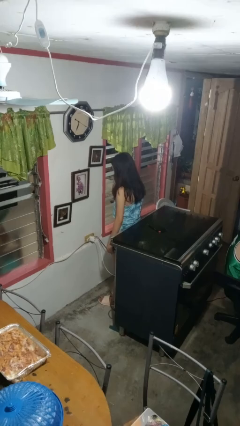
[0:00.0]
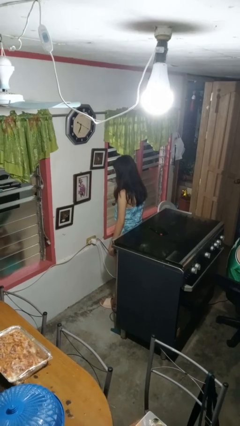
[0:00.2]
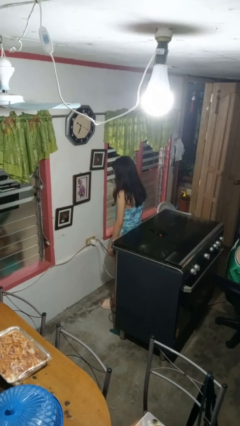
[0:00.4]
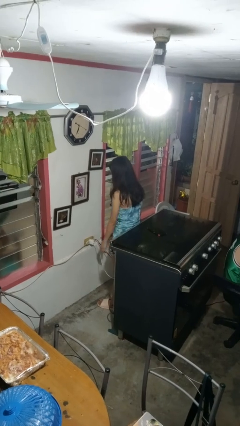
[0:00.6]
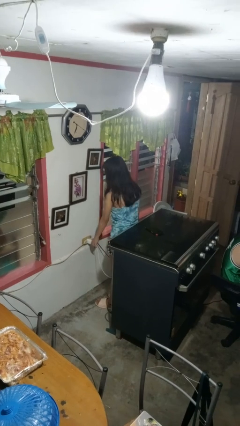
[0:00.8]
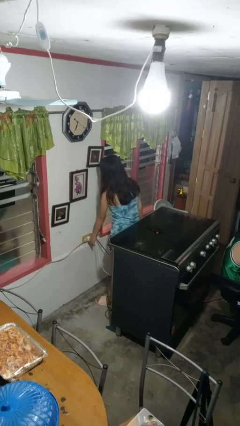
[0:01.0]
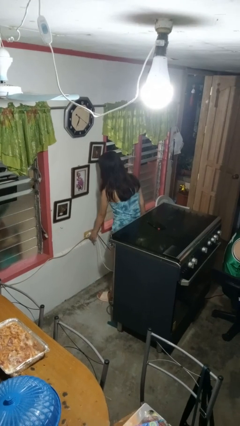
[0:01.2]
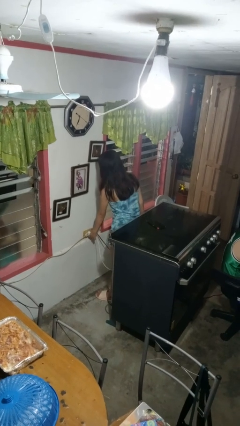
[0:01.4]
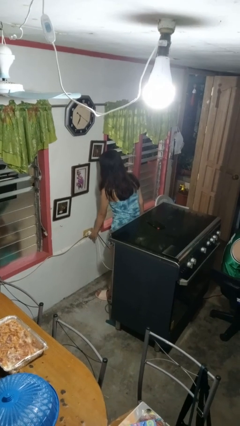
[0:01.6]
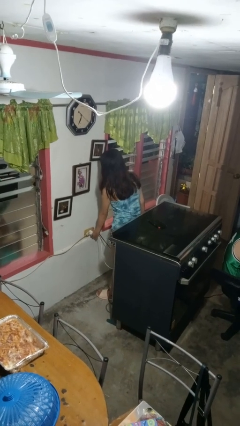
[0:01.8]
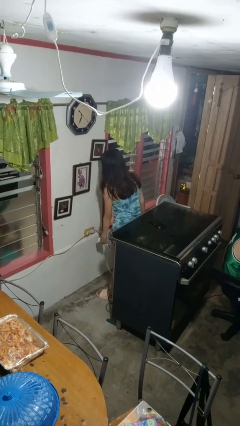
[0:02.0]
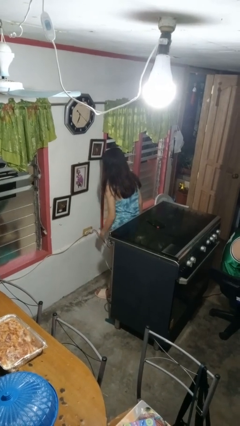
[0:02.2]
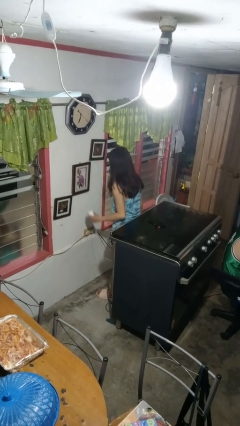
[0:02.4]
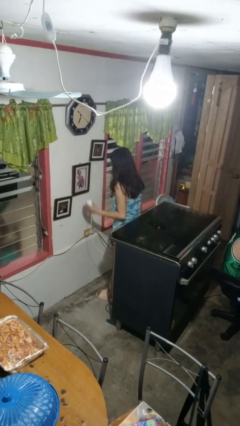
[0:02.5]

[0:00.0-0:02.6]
person unplugs from electrical socket

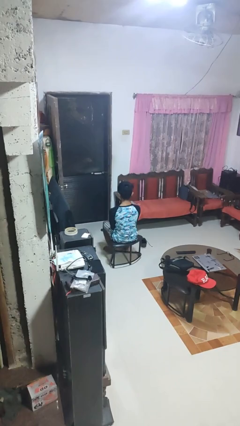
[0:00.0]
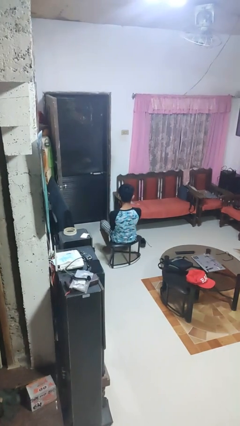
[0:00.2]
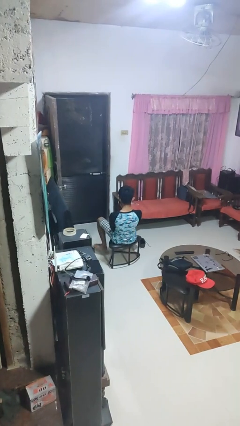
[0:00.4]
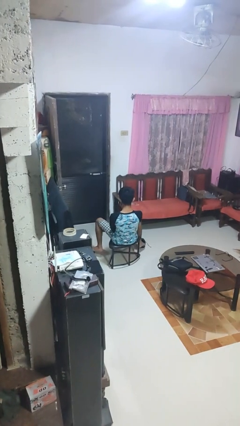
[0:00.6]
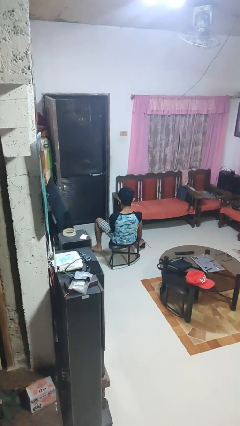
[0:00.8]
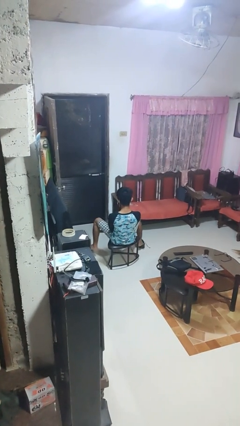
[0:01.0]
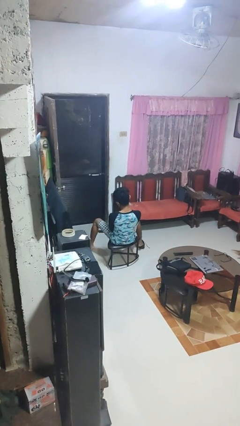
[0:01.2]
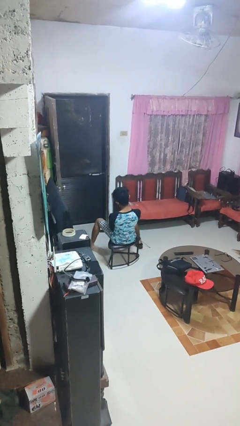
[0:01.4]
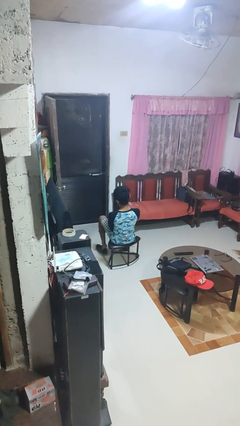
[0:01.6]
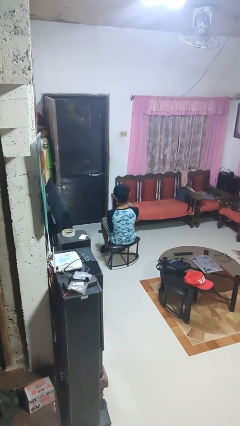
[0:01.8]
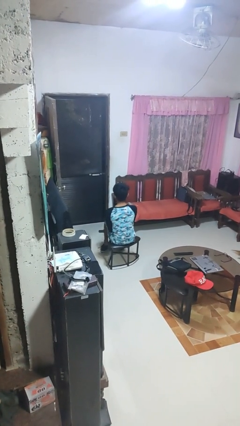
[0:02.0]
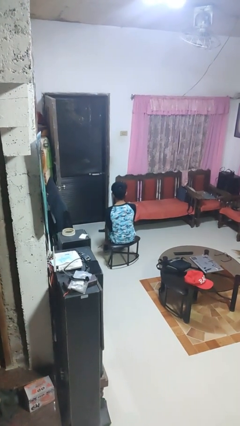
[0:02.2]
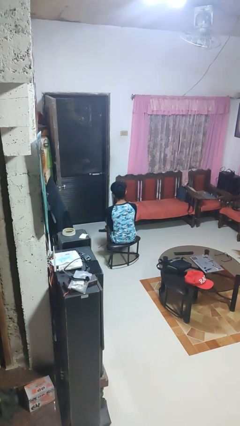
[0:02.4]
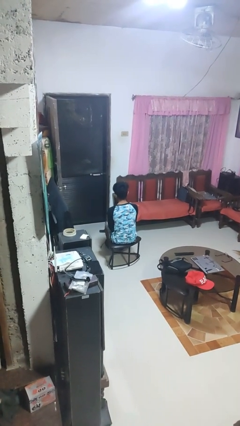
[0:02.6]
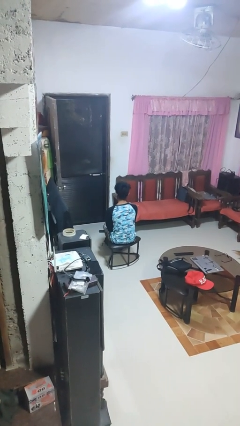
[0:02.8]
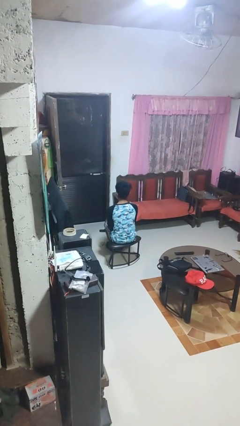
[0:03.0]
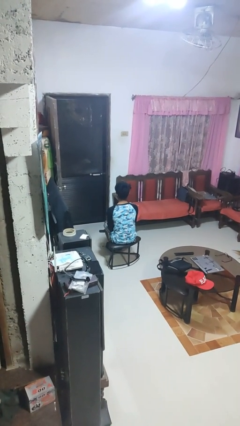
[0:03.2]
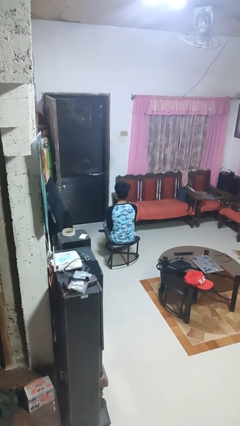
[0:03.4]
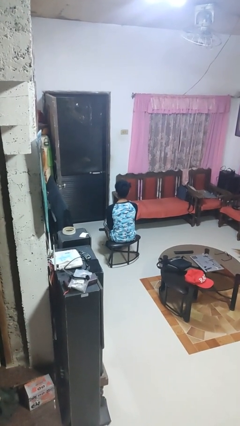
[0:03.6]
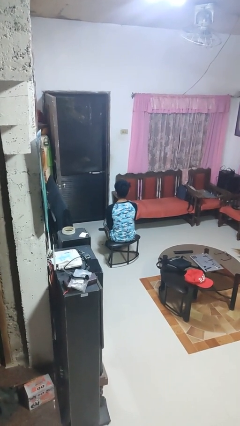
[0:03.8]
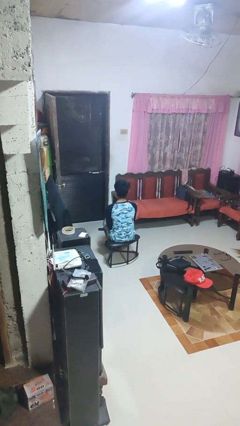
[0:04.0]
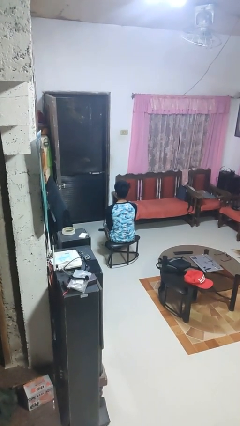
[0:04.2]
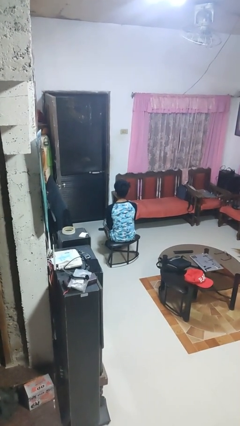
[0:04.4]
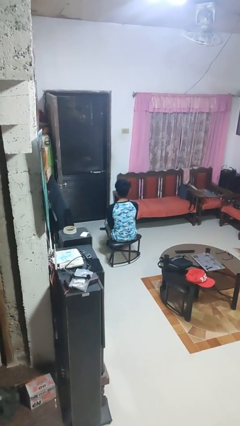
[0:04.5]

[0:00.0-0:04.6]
person puts on shoes

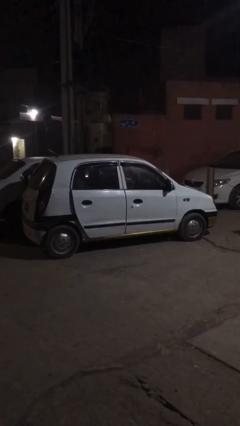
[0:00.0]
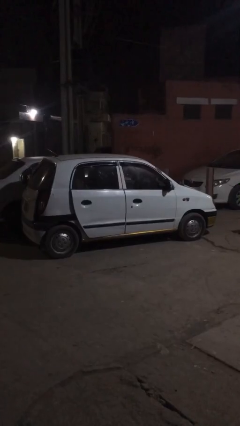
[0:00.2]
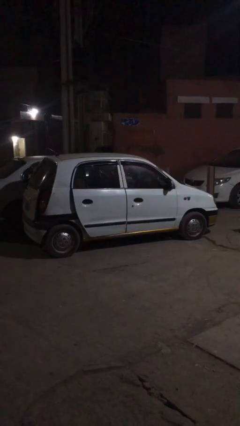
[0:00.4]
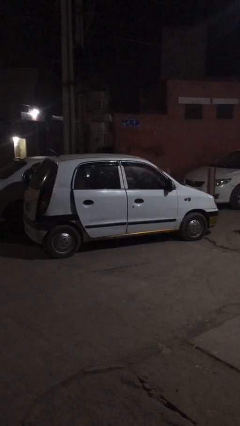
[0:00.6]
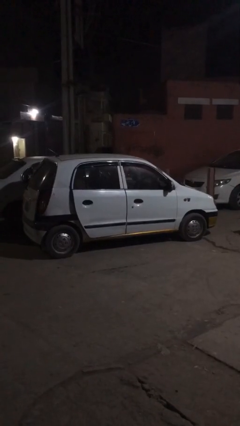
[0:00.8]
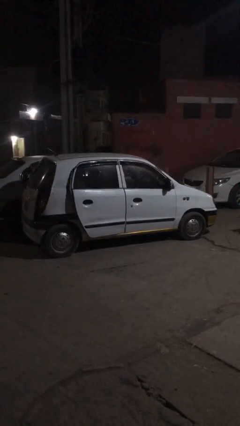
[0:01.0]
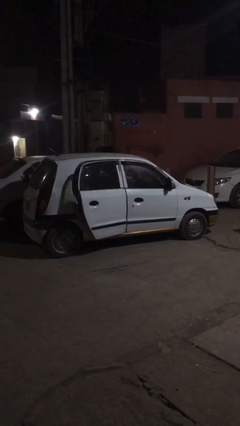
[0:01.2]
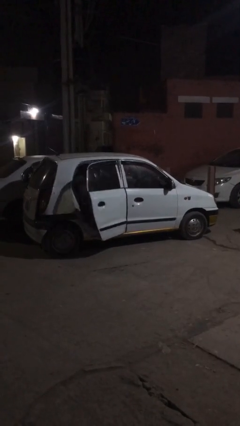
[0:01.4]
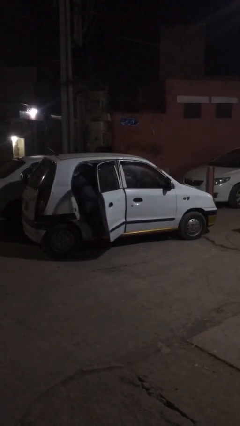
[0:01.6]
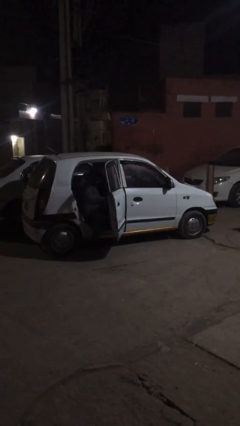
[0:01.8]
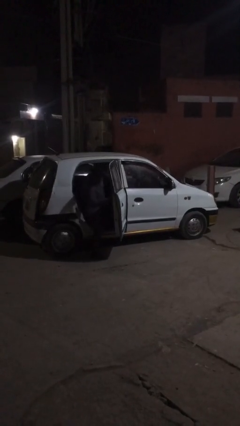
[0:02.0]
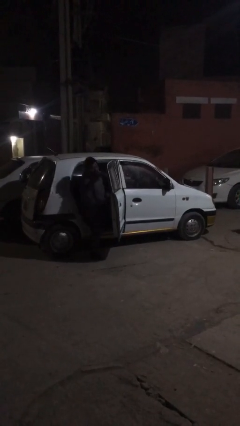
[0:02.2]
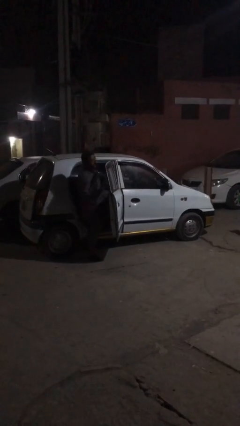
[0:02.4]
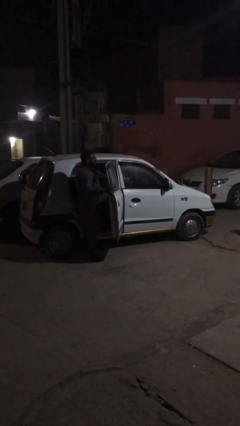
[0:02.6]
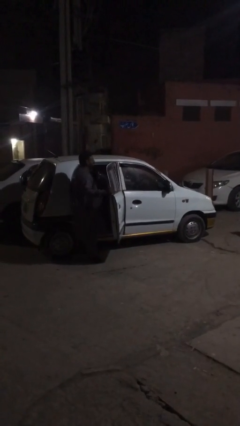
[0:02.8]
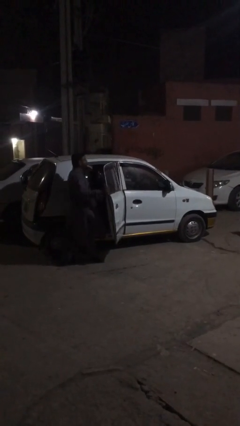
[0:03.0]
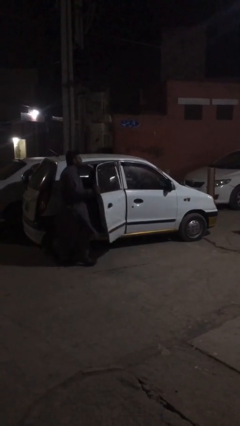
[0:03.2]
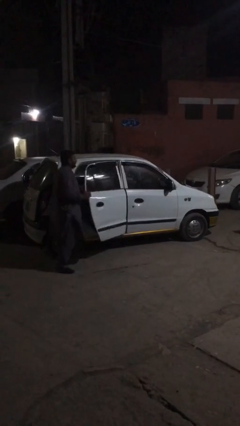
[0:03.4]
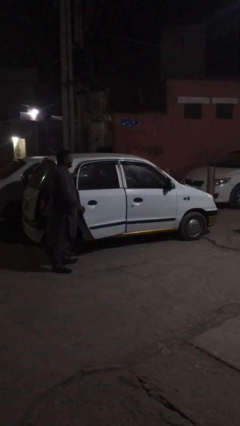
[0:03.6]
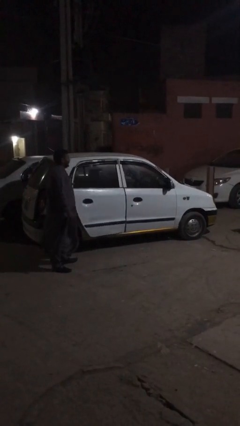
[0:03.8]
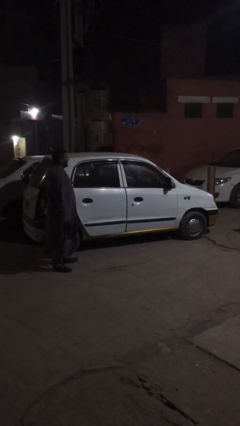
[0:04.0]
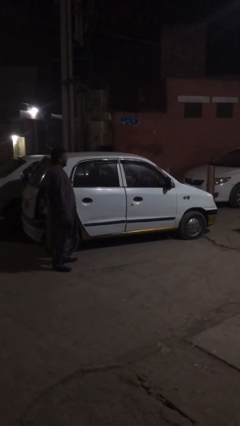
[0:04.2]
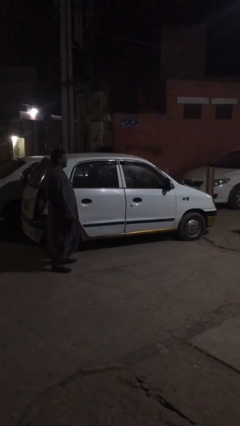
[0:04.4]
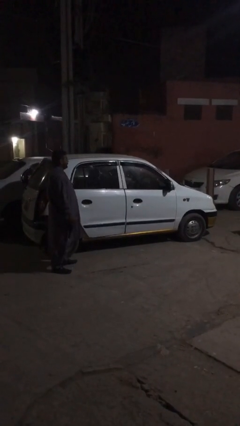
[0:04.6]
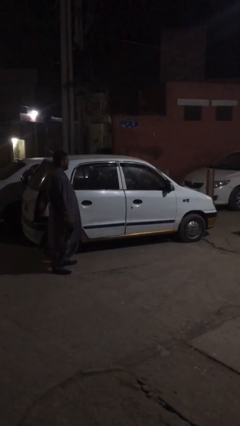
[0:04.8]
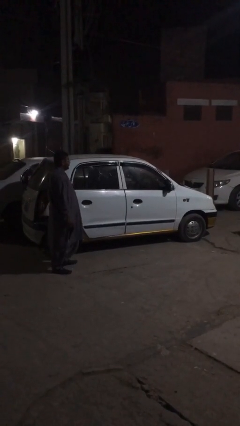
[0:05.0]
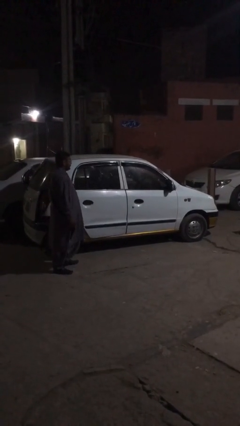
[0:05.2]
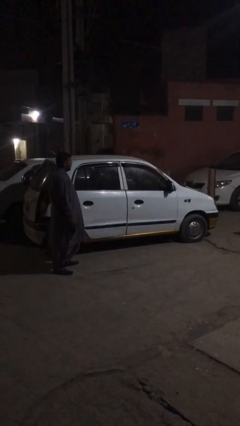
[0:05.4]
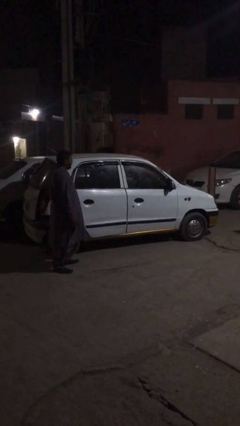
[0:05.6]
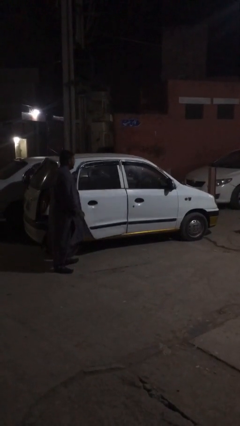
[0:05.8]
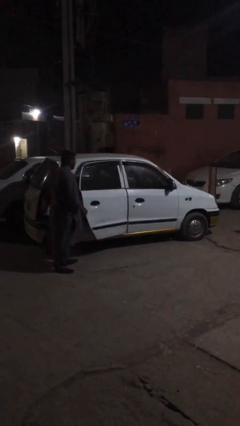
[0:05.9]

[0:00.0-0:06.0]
car drops off person

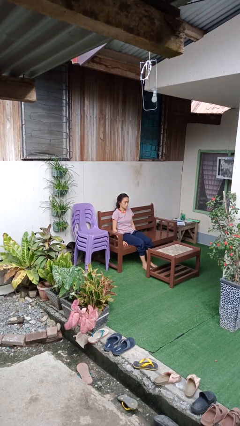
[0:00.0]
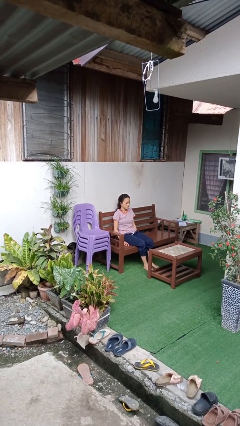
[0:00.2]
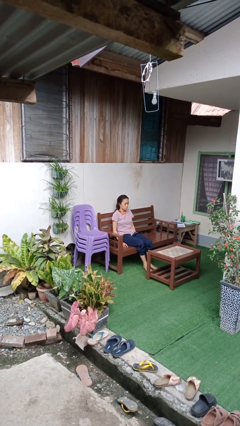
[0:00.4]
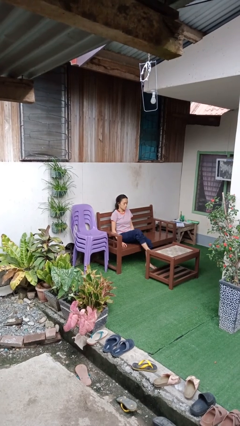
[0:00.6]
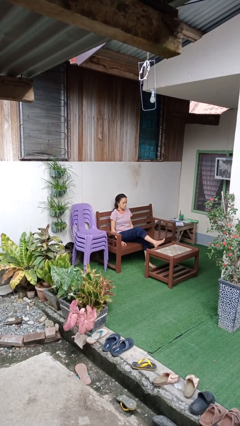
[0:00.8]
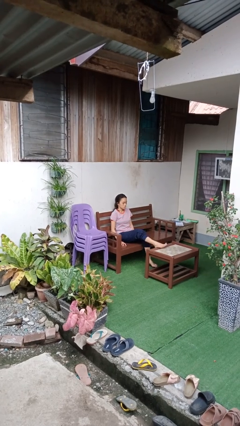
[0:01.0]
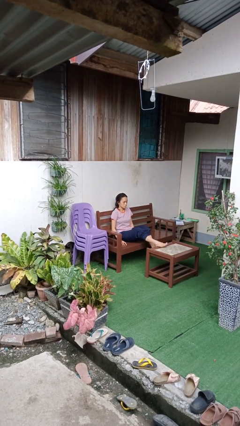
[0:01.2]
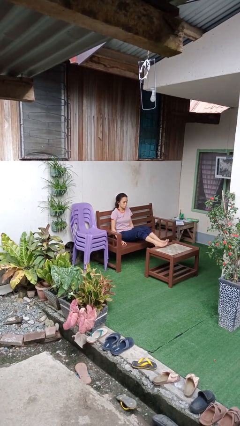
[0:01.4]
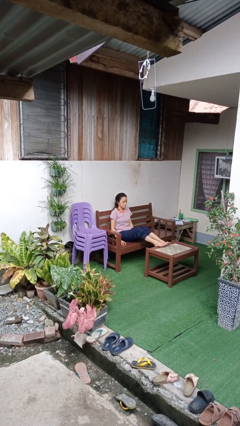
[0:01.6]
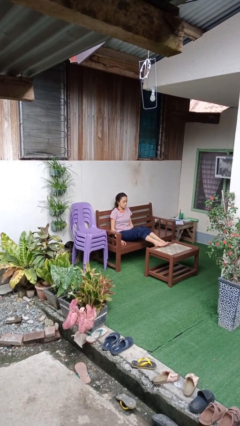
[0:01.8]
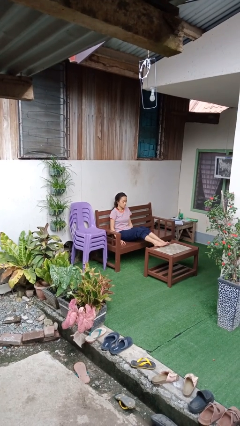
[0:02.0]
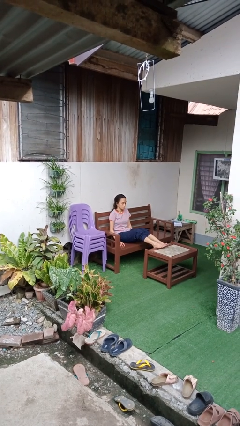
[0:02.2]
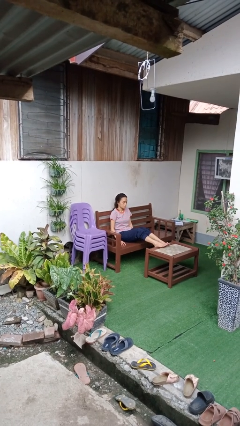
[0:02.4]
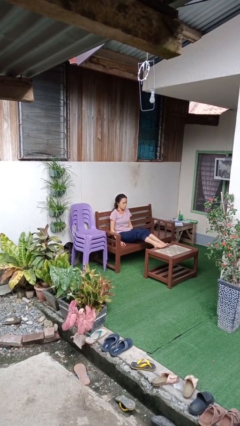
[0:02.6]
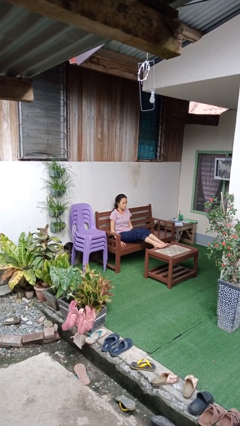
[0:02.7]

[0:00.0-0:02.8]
person puts feet up

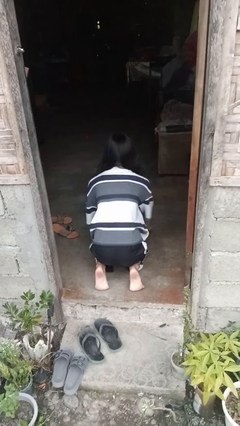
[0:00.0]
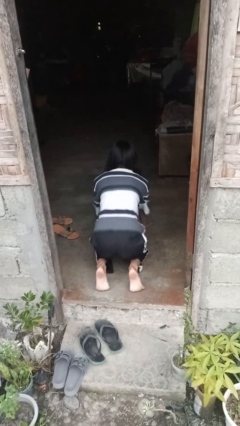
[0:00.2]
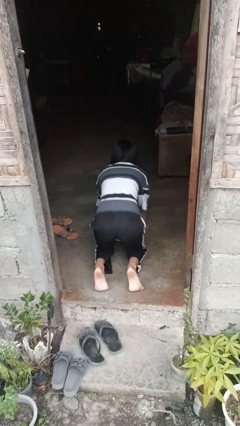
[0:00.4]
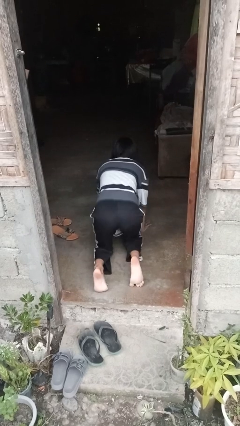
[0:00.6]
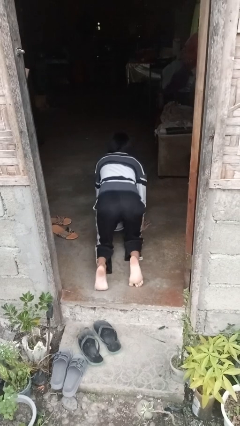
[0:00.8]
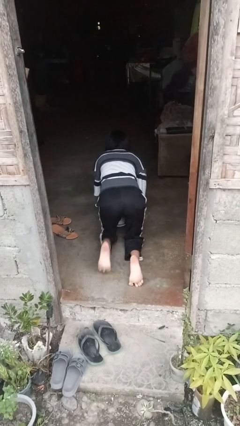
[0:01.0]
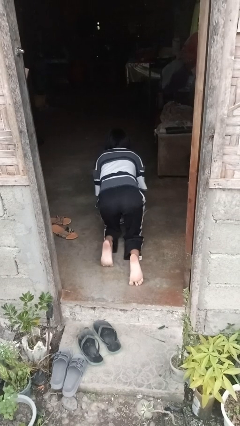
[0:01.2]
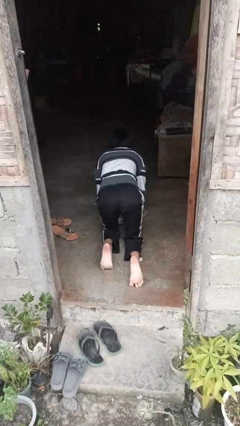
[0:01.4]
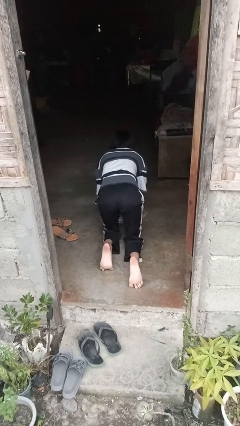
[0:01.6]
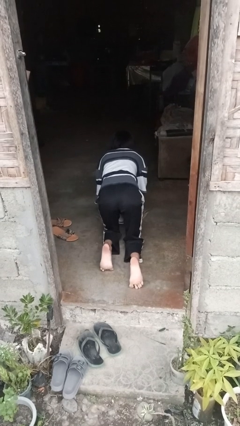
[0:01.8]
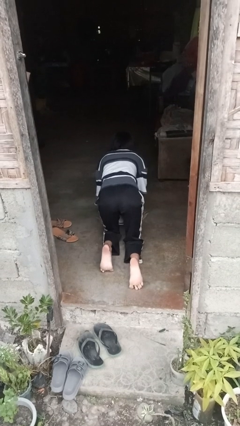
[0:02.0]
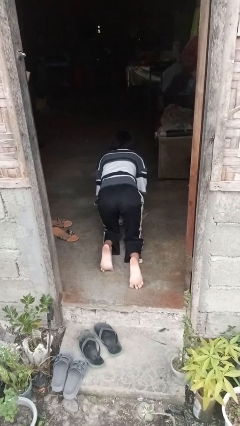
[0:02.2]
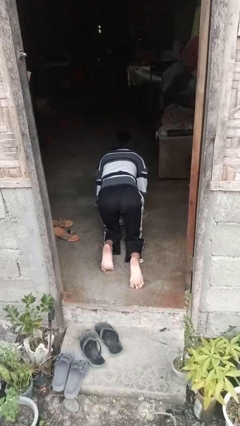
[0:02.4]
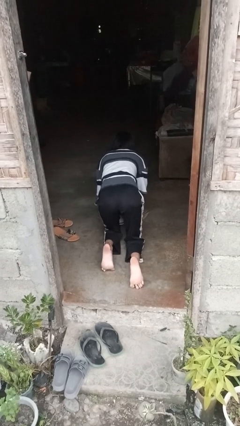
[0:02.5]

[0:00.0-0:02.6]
person crawls
